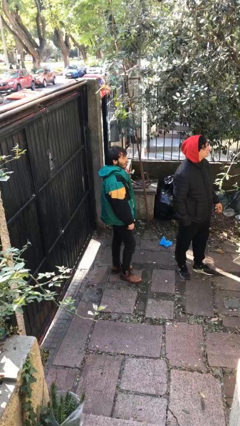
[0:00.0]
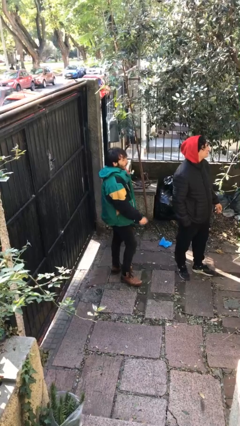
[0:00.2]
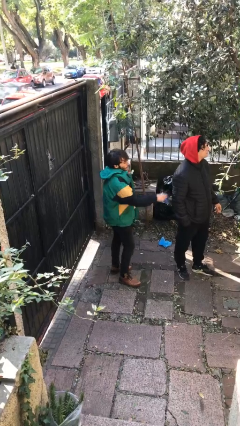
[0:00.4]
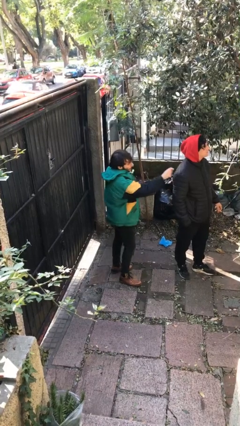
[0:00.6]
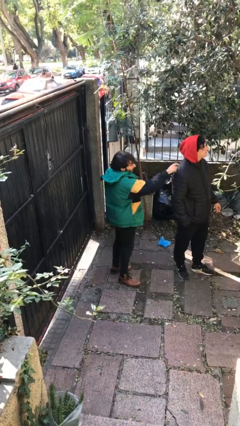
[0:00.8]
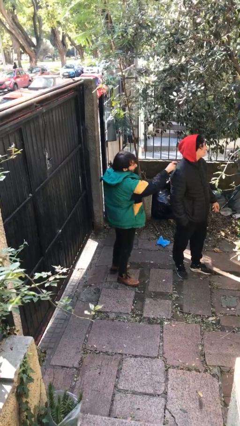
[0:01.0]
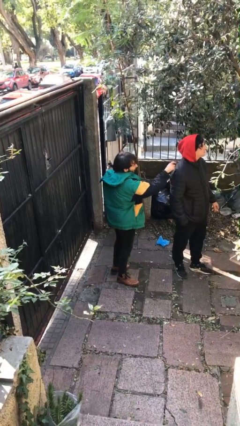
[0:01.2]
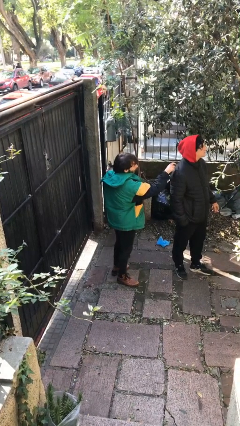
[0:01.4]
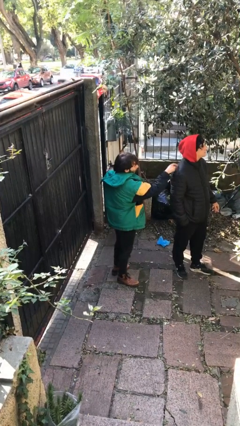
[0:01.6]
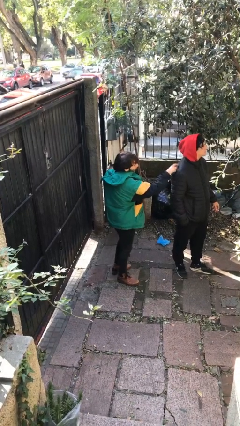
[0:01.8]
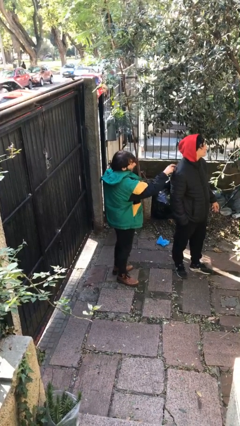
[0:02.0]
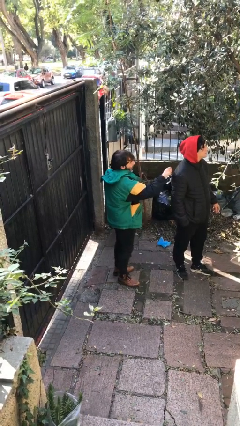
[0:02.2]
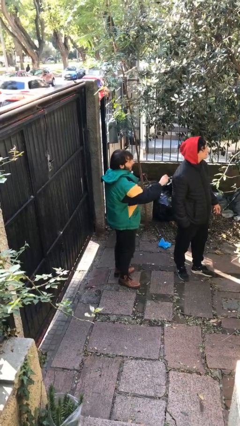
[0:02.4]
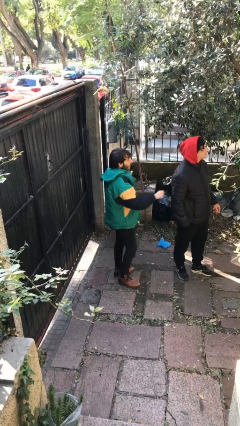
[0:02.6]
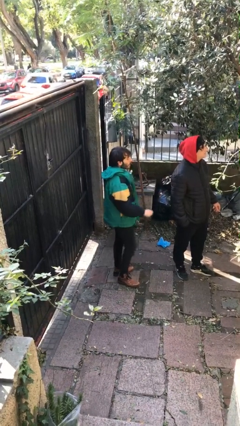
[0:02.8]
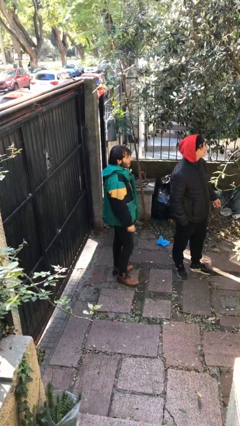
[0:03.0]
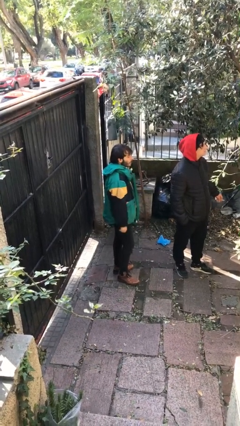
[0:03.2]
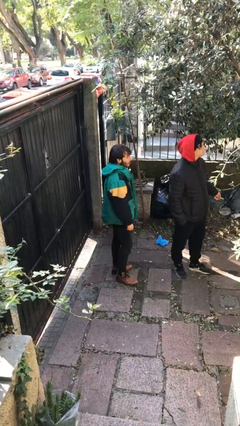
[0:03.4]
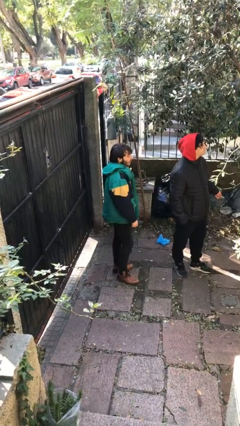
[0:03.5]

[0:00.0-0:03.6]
person touches back of person

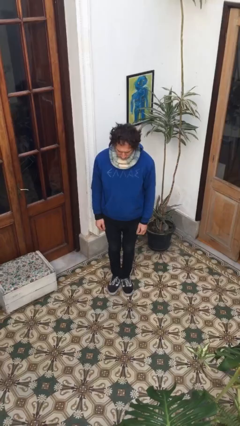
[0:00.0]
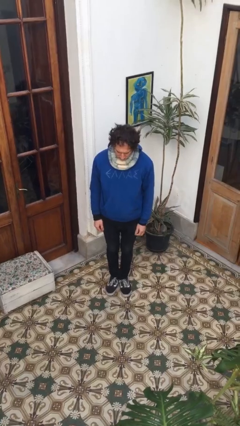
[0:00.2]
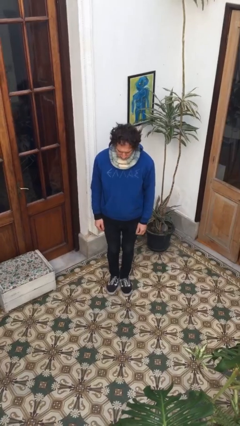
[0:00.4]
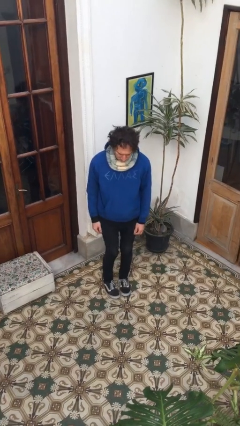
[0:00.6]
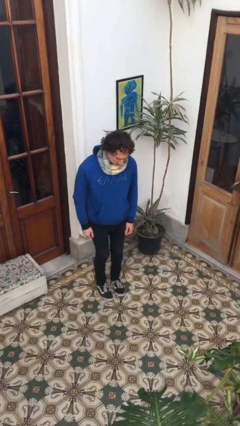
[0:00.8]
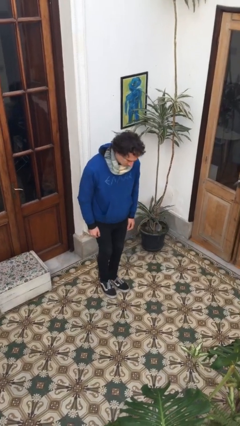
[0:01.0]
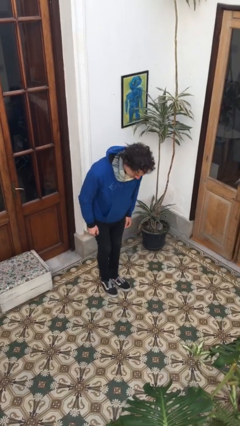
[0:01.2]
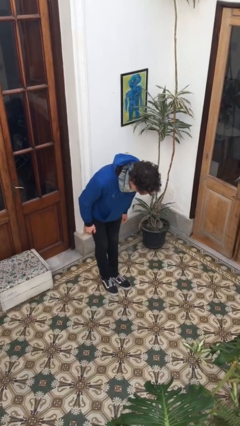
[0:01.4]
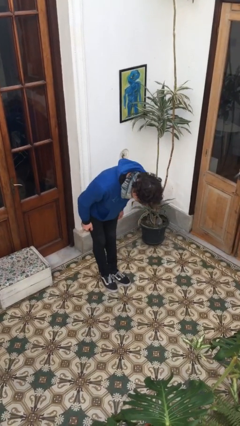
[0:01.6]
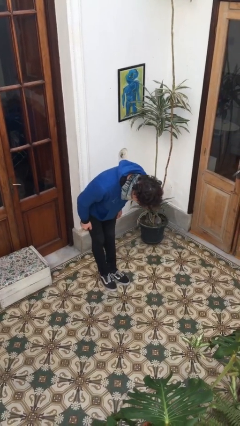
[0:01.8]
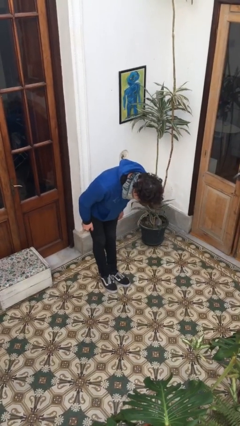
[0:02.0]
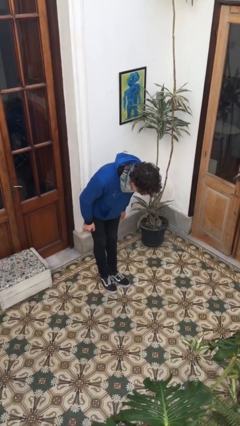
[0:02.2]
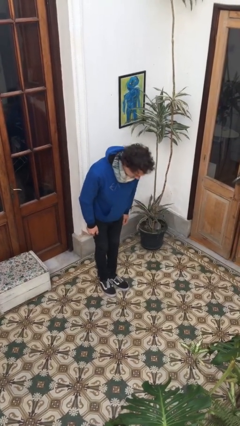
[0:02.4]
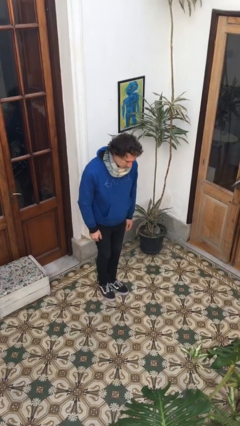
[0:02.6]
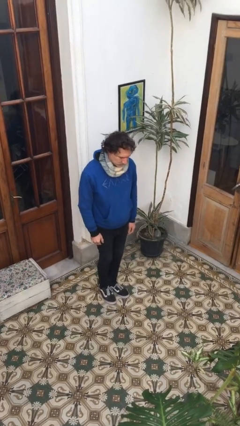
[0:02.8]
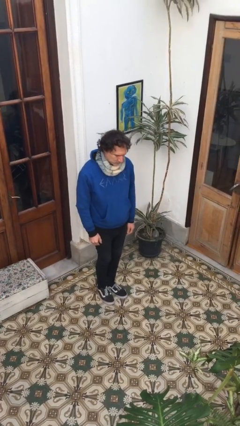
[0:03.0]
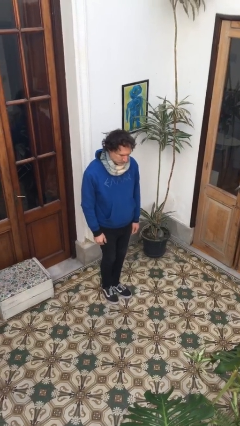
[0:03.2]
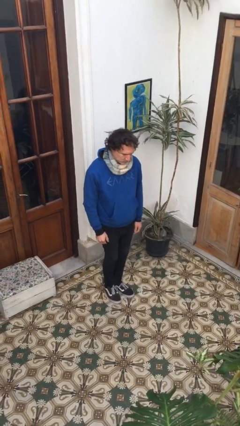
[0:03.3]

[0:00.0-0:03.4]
person bows

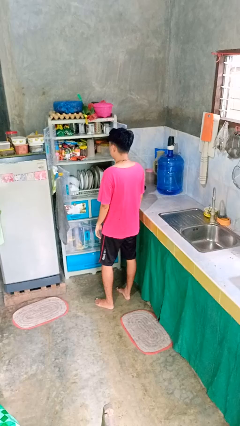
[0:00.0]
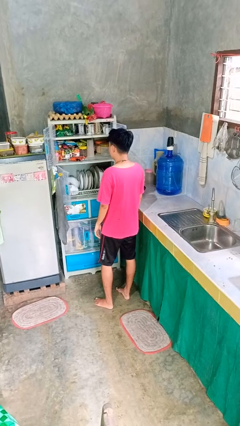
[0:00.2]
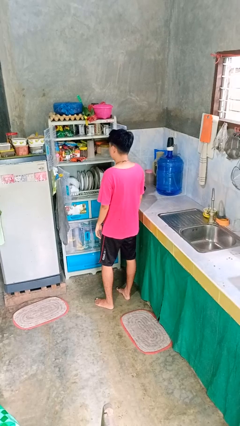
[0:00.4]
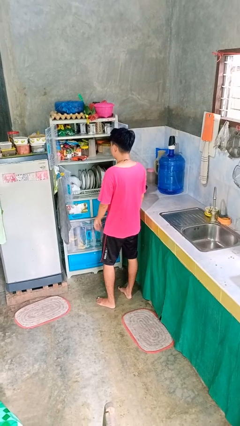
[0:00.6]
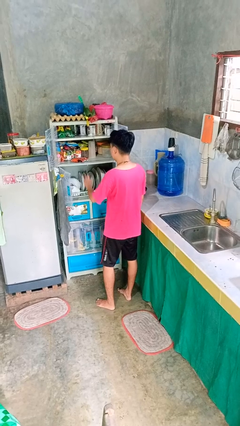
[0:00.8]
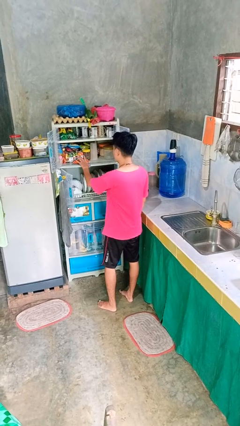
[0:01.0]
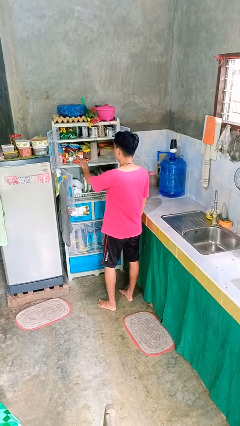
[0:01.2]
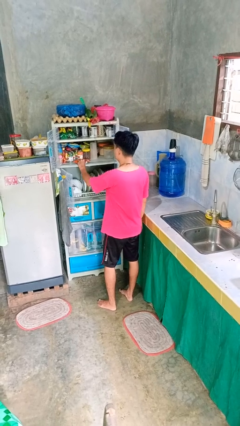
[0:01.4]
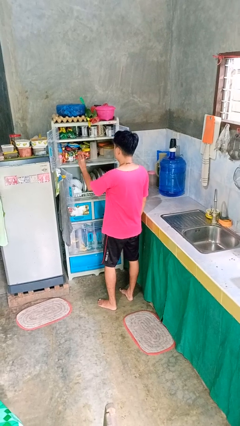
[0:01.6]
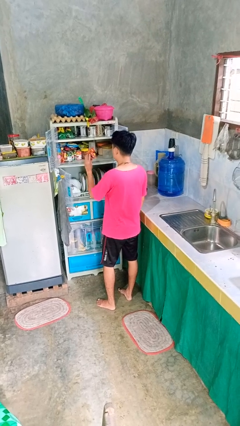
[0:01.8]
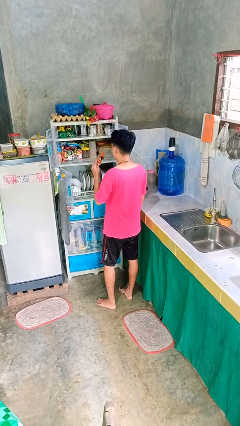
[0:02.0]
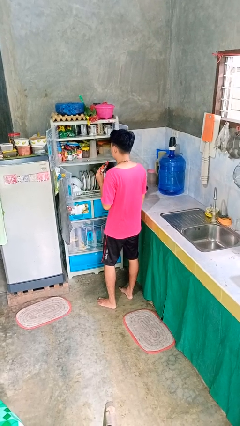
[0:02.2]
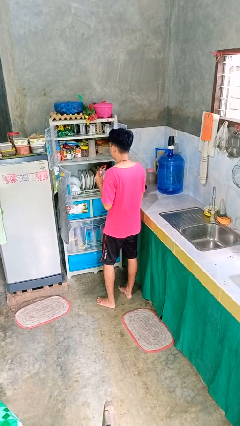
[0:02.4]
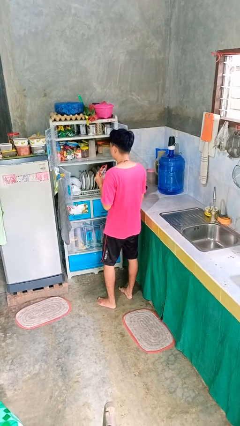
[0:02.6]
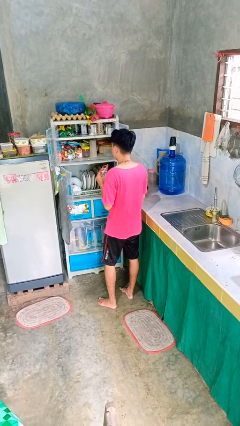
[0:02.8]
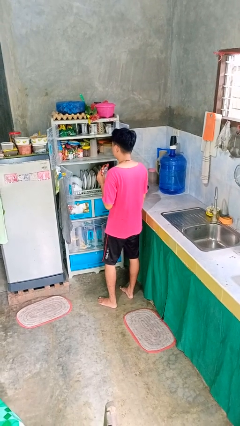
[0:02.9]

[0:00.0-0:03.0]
person takes object from cabinet

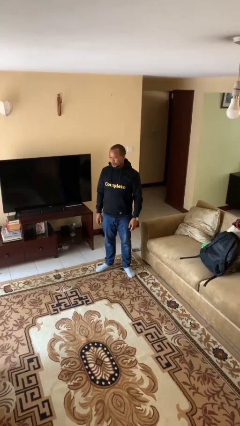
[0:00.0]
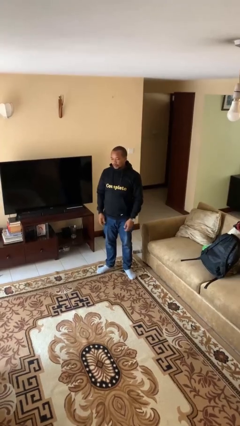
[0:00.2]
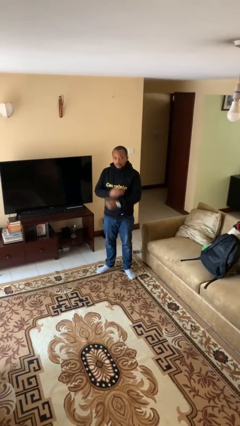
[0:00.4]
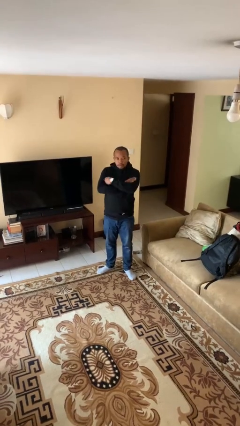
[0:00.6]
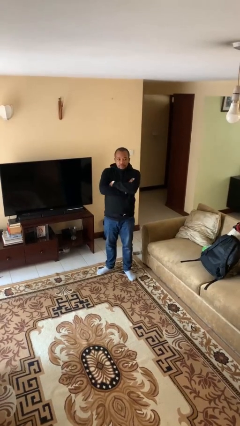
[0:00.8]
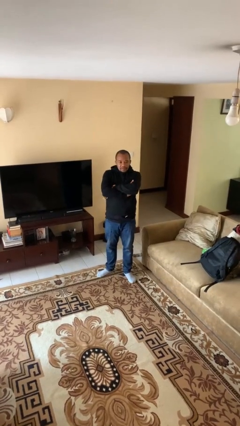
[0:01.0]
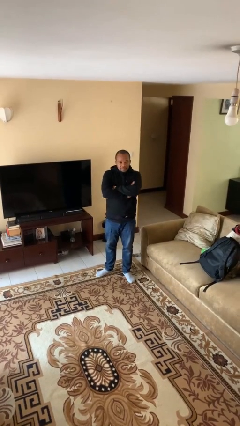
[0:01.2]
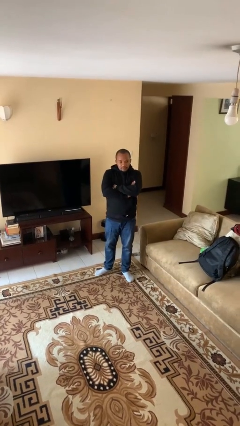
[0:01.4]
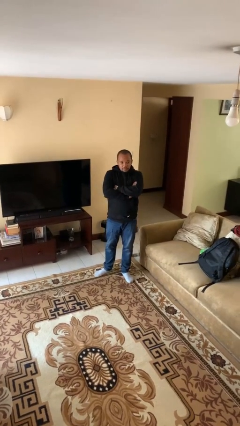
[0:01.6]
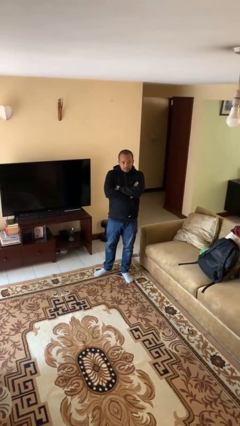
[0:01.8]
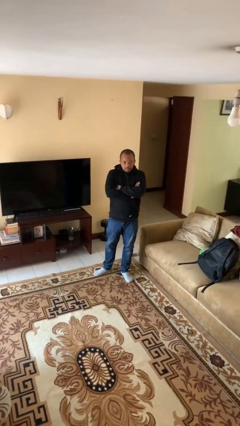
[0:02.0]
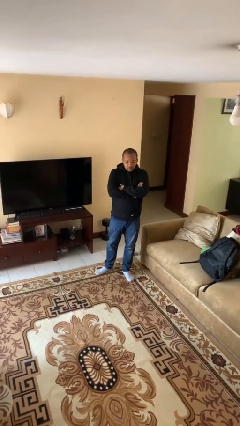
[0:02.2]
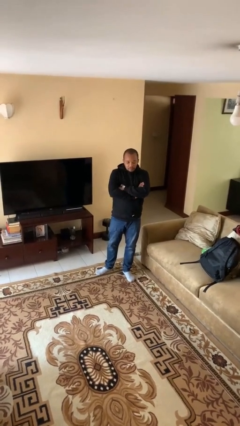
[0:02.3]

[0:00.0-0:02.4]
person crosses arms

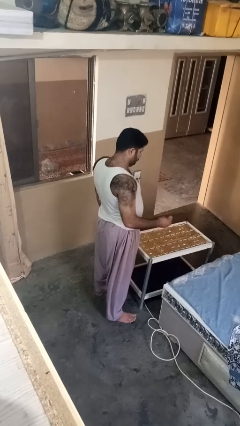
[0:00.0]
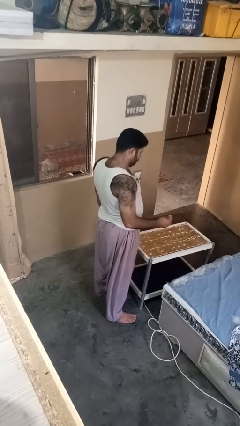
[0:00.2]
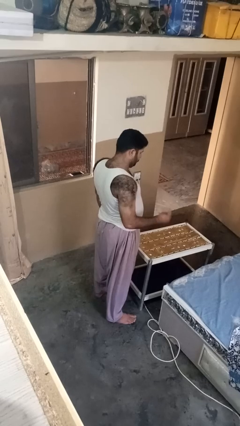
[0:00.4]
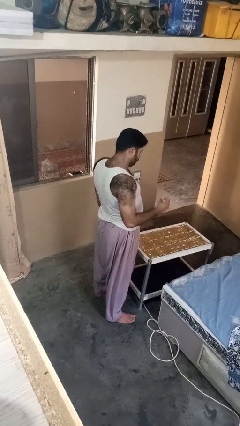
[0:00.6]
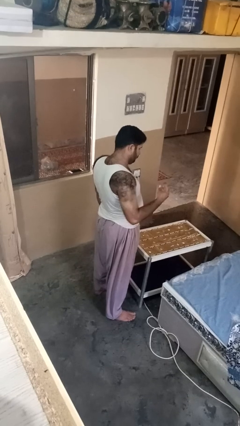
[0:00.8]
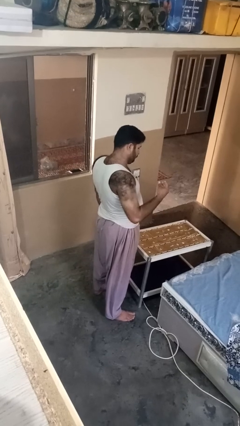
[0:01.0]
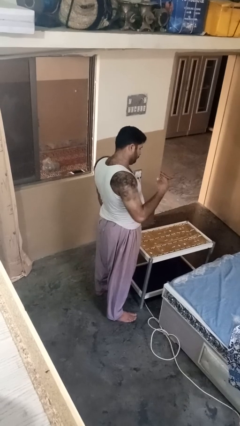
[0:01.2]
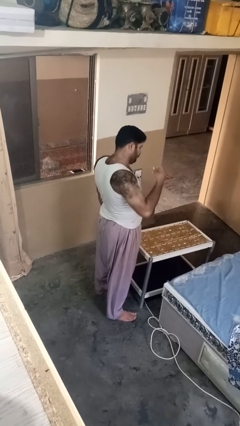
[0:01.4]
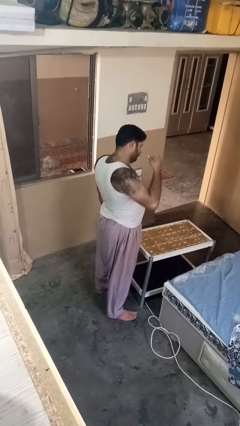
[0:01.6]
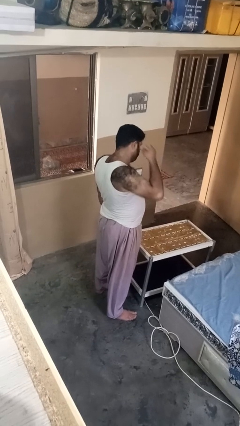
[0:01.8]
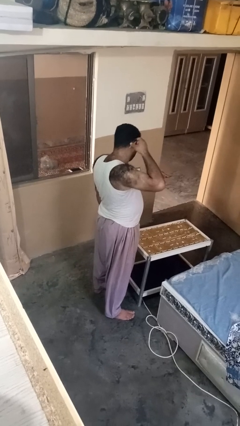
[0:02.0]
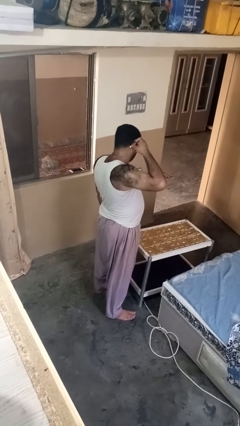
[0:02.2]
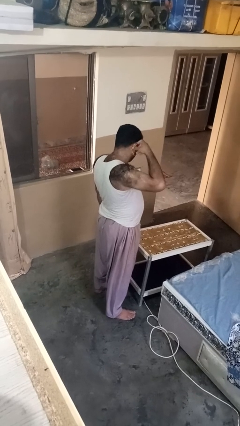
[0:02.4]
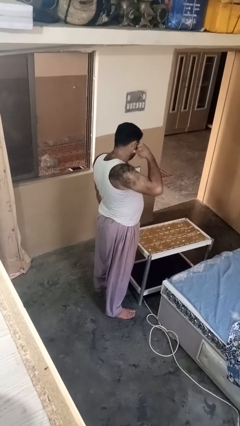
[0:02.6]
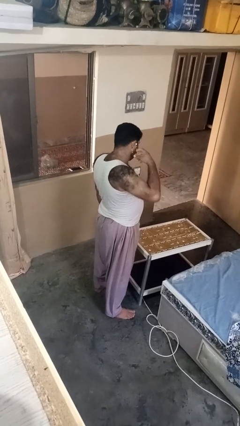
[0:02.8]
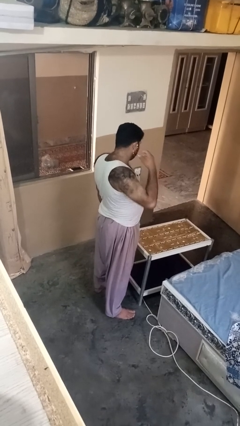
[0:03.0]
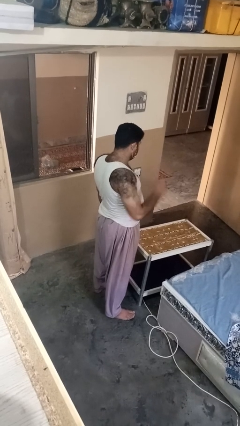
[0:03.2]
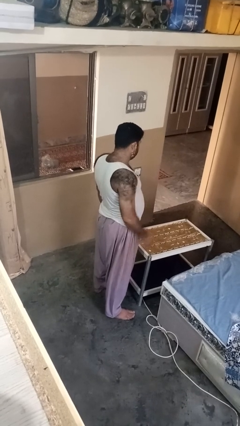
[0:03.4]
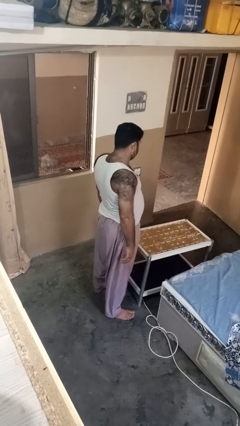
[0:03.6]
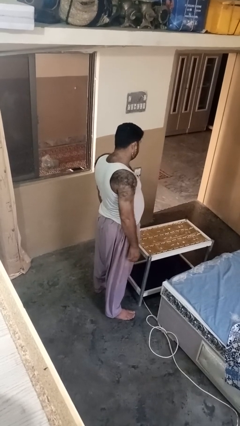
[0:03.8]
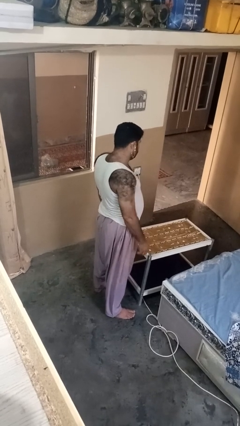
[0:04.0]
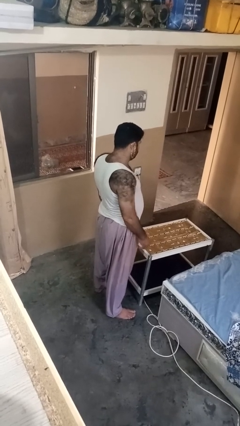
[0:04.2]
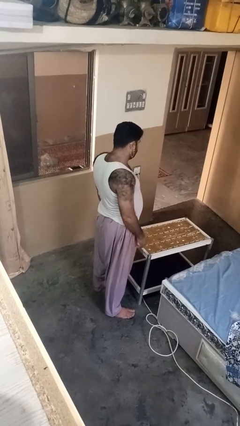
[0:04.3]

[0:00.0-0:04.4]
person puts on earrings

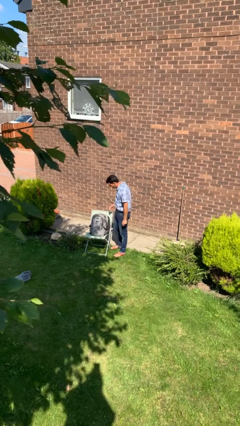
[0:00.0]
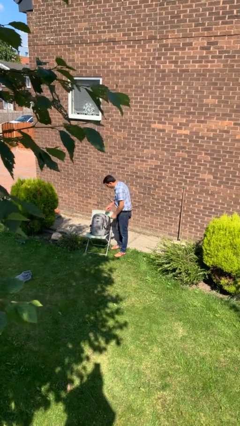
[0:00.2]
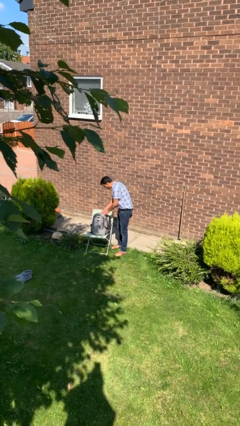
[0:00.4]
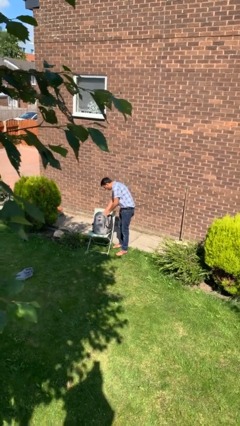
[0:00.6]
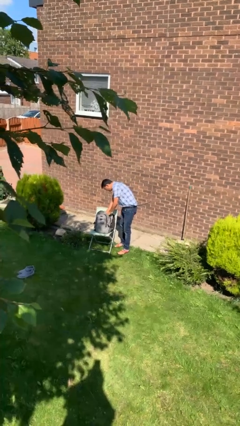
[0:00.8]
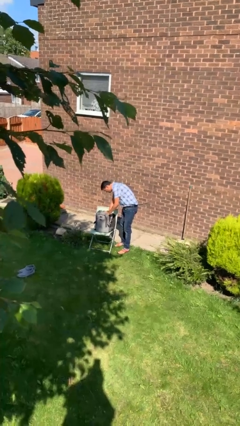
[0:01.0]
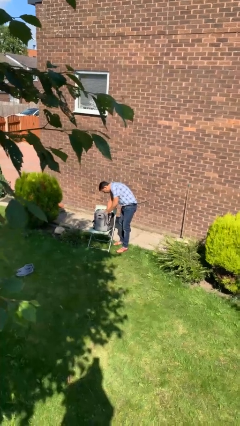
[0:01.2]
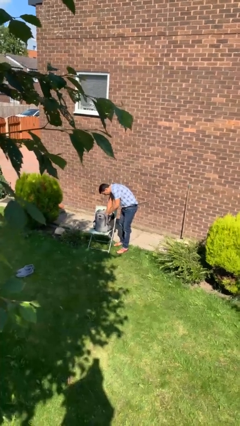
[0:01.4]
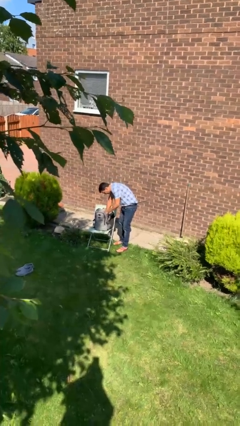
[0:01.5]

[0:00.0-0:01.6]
person searches in backpack
